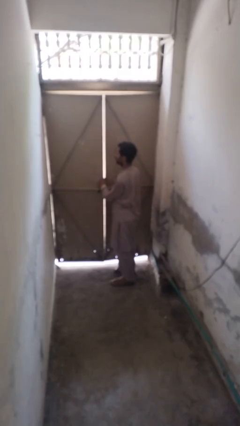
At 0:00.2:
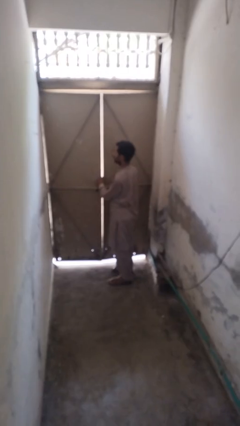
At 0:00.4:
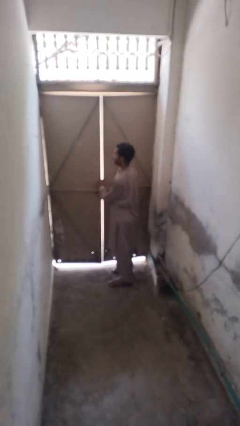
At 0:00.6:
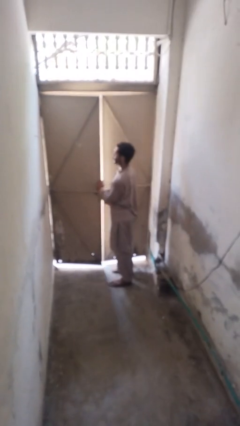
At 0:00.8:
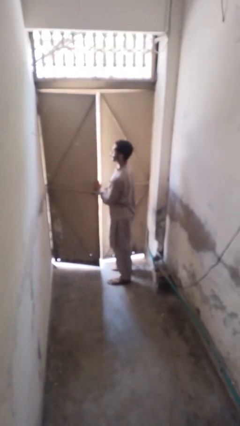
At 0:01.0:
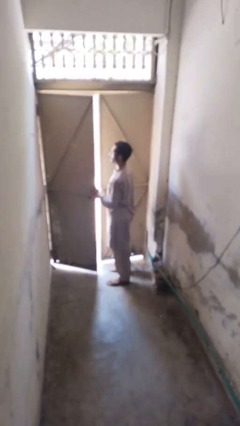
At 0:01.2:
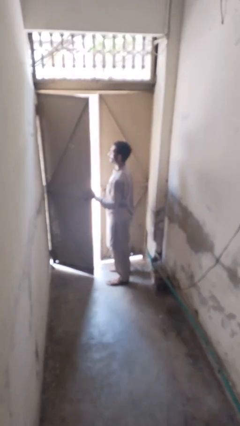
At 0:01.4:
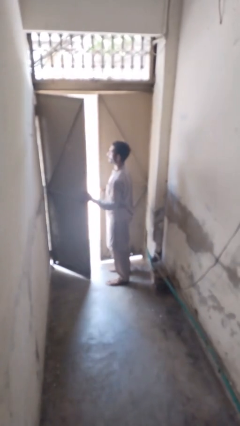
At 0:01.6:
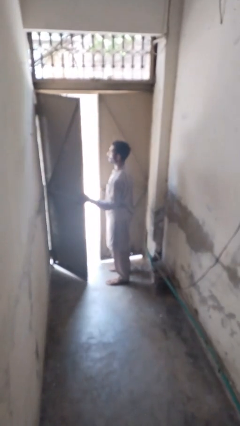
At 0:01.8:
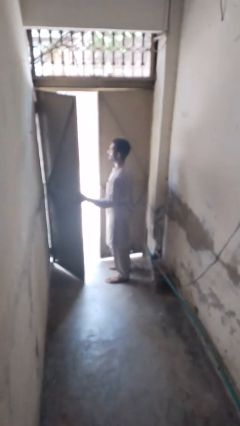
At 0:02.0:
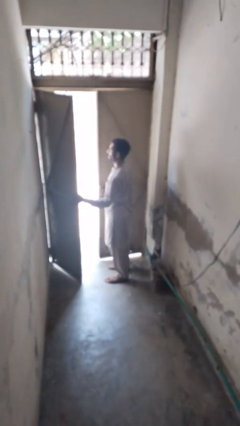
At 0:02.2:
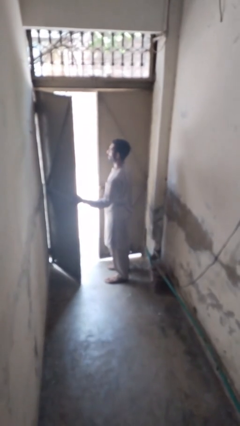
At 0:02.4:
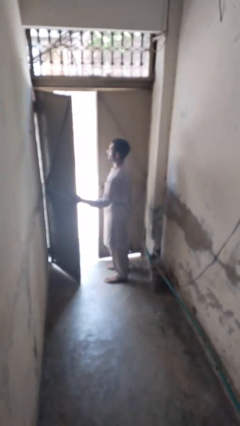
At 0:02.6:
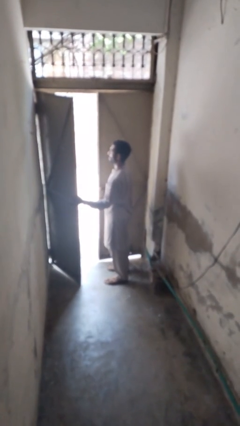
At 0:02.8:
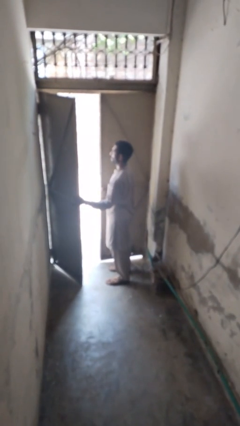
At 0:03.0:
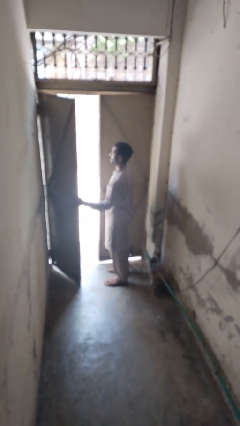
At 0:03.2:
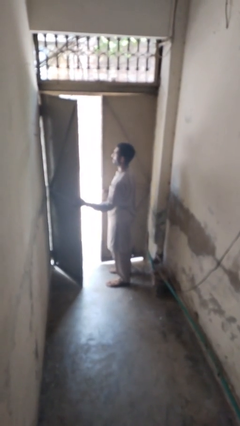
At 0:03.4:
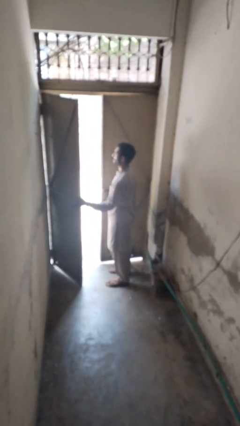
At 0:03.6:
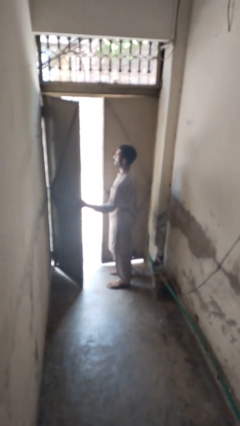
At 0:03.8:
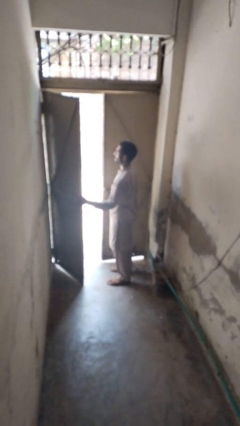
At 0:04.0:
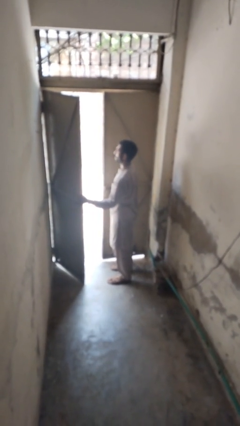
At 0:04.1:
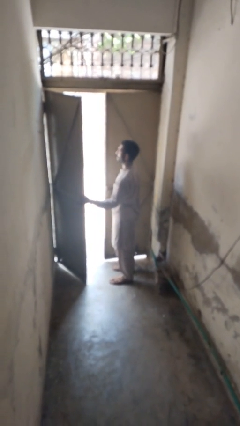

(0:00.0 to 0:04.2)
person opens gate

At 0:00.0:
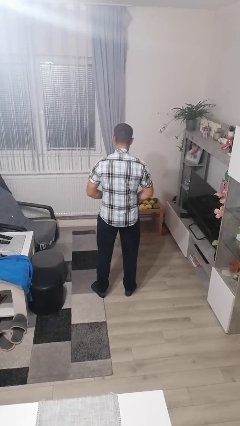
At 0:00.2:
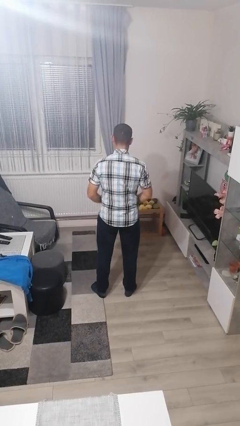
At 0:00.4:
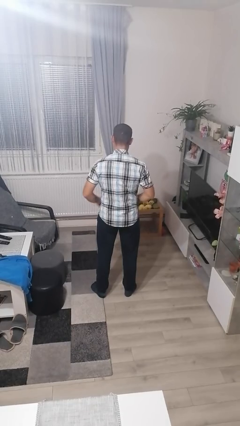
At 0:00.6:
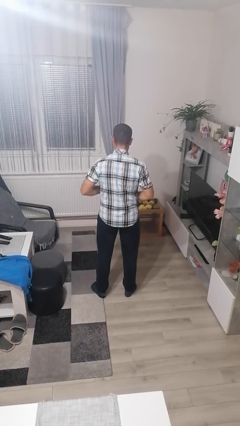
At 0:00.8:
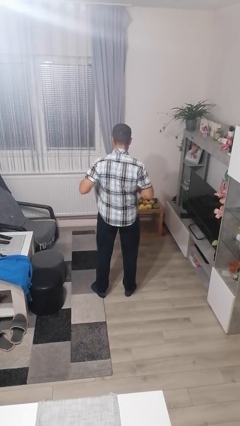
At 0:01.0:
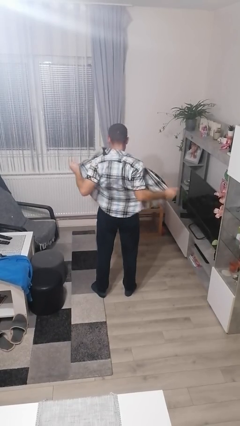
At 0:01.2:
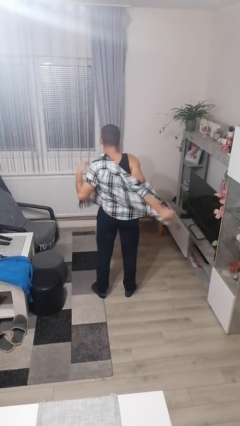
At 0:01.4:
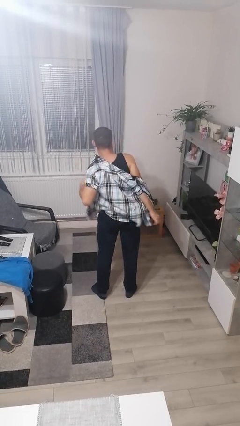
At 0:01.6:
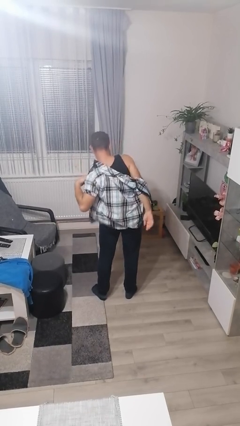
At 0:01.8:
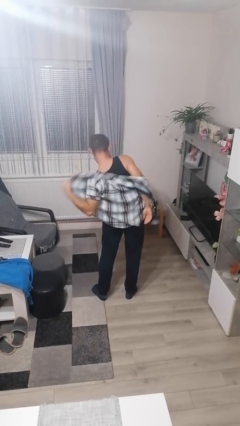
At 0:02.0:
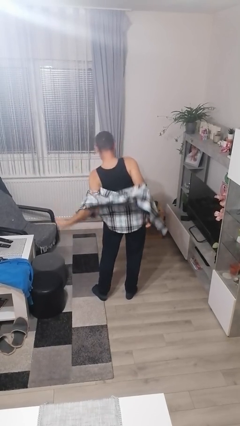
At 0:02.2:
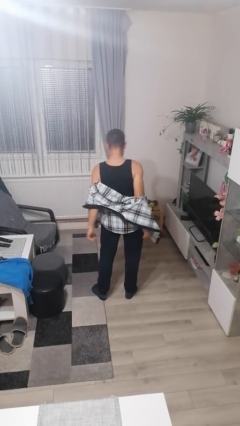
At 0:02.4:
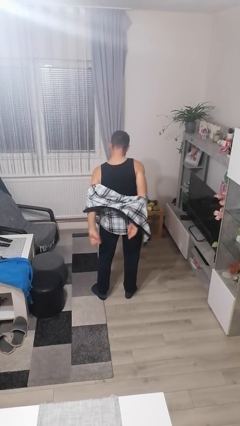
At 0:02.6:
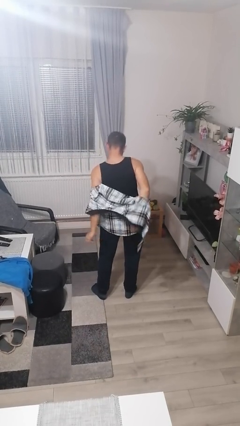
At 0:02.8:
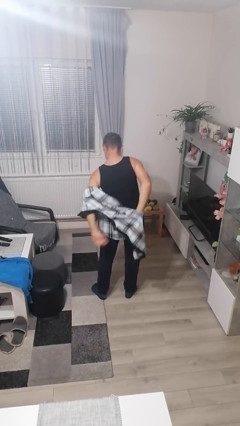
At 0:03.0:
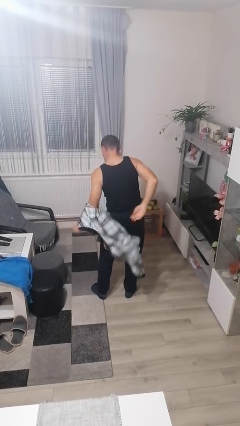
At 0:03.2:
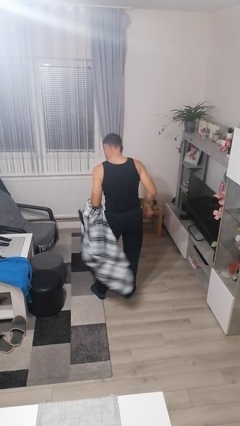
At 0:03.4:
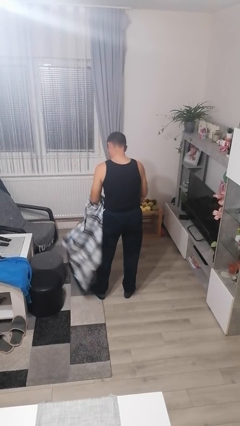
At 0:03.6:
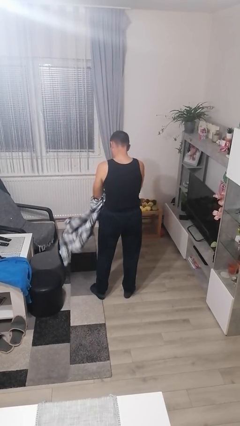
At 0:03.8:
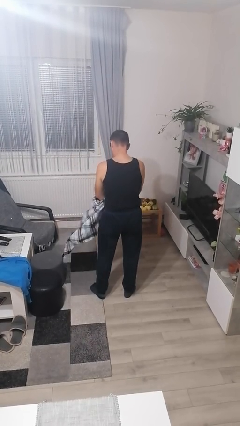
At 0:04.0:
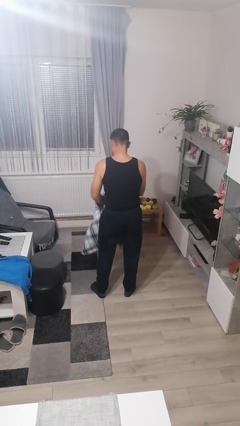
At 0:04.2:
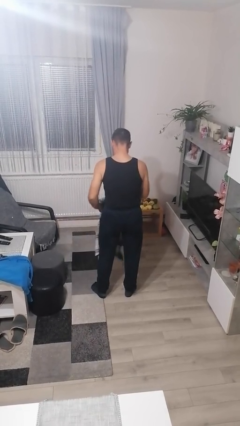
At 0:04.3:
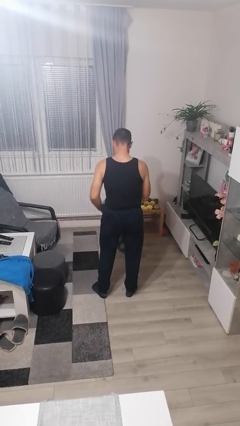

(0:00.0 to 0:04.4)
person takes off shirt

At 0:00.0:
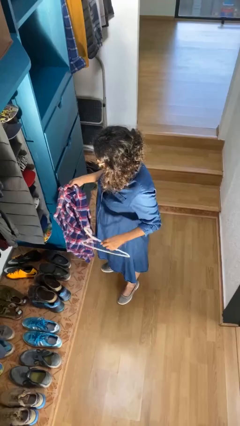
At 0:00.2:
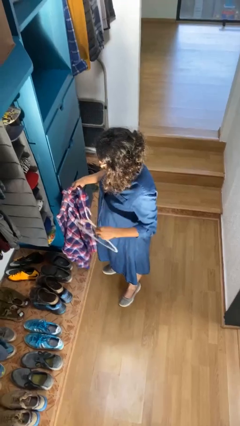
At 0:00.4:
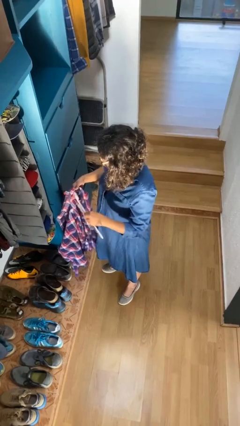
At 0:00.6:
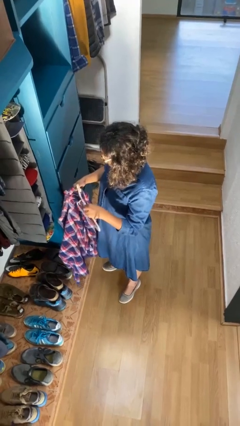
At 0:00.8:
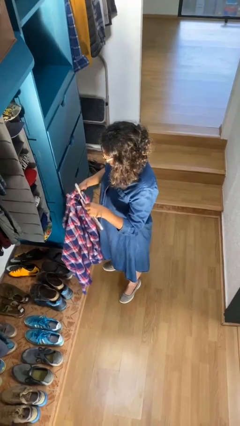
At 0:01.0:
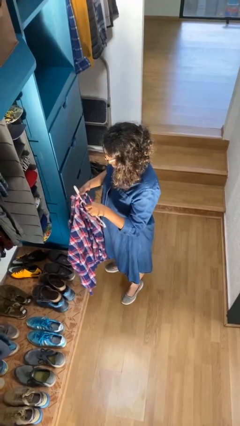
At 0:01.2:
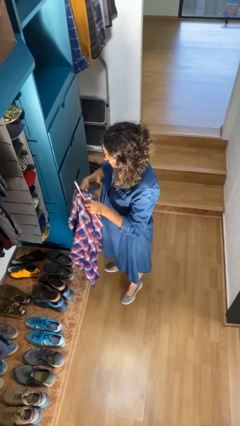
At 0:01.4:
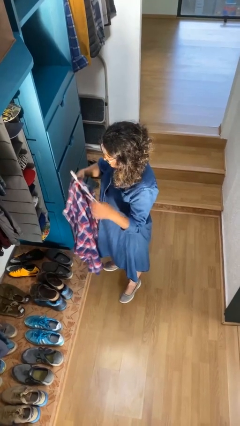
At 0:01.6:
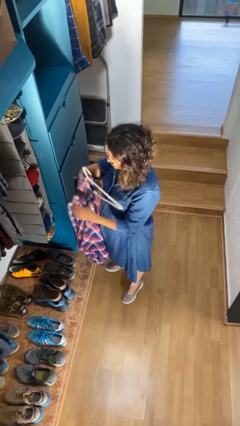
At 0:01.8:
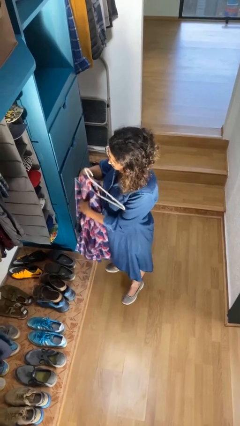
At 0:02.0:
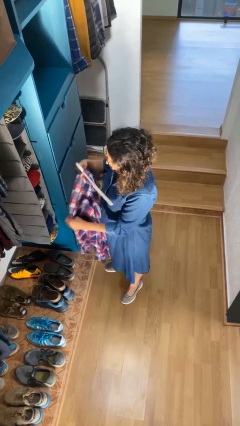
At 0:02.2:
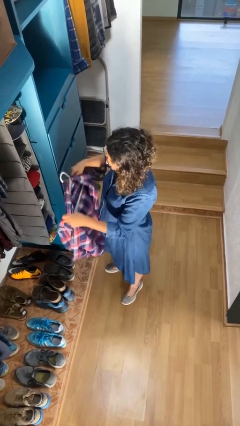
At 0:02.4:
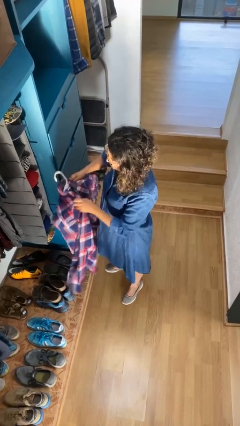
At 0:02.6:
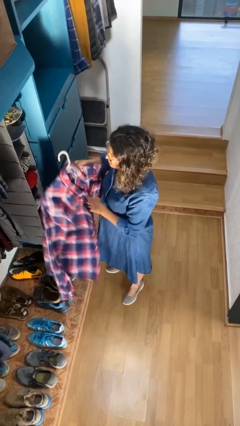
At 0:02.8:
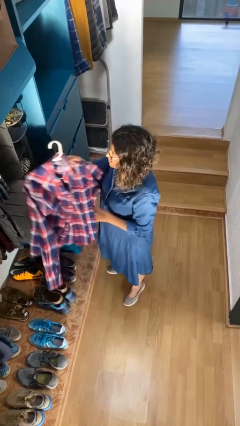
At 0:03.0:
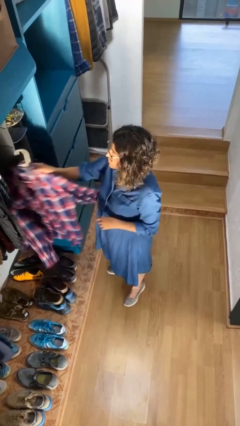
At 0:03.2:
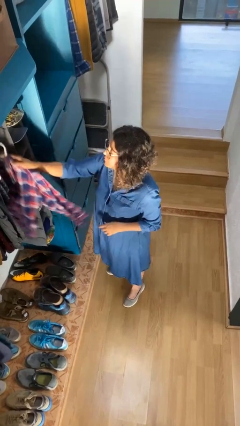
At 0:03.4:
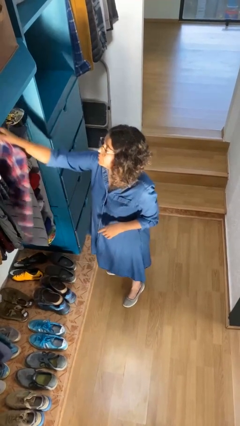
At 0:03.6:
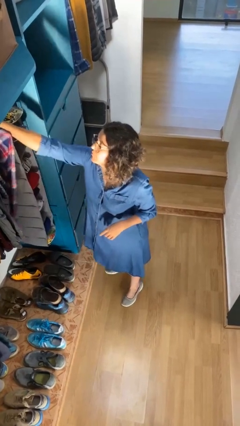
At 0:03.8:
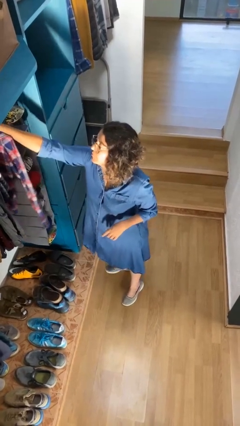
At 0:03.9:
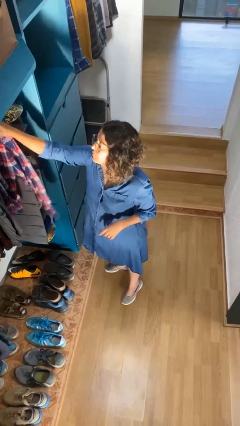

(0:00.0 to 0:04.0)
person puts clothes into closet

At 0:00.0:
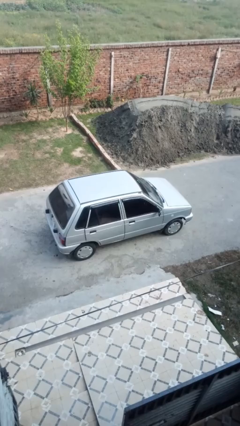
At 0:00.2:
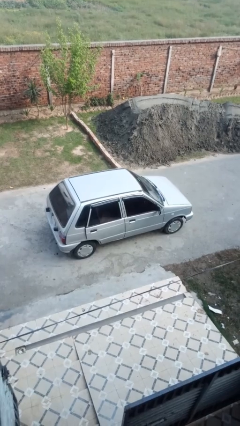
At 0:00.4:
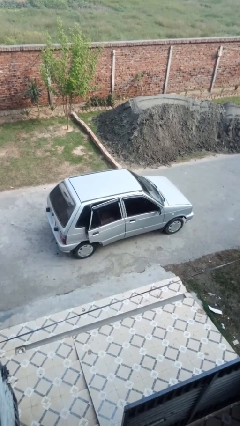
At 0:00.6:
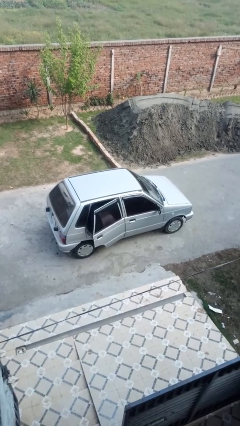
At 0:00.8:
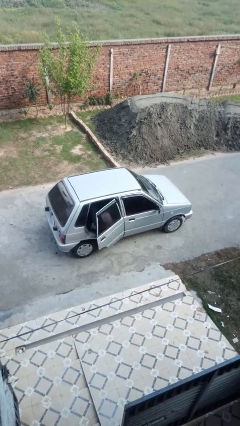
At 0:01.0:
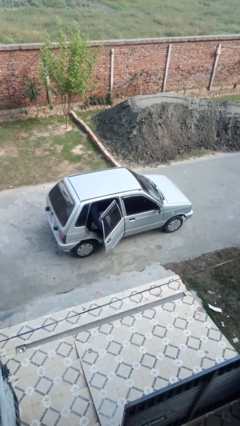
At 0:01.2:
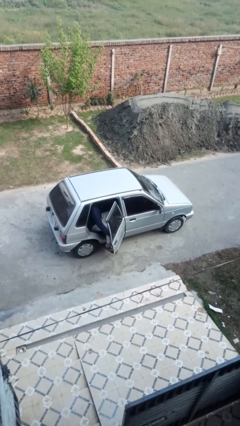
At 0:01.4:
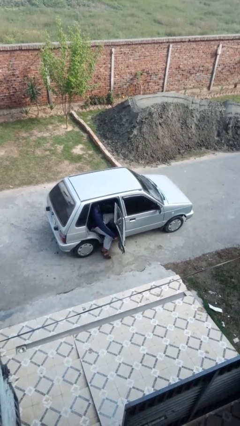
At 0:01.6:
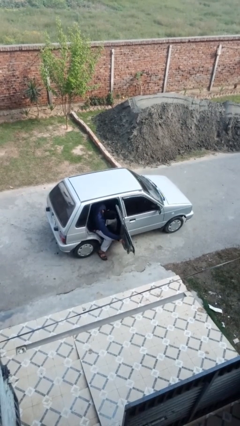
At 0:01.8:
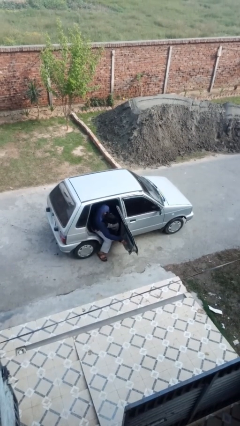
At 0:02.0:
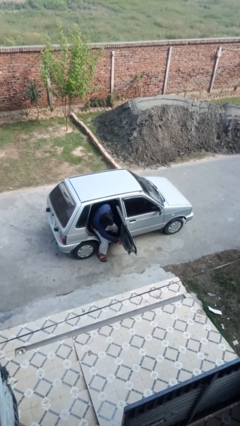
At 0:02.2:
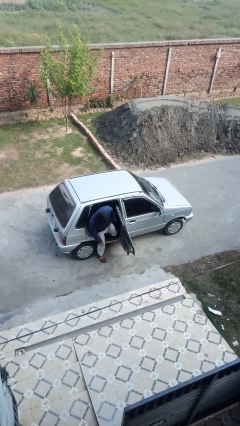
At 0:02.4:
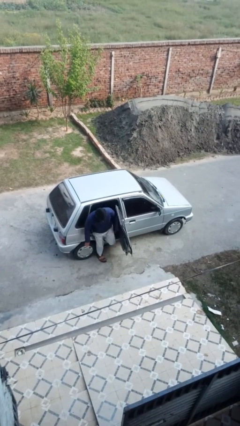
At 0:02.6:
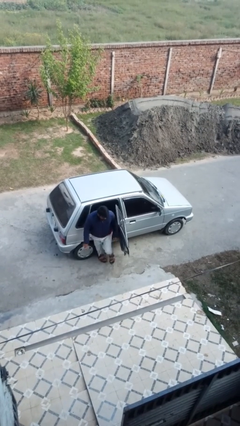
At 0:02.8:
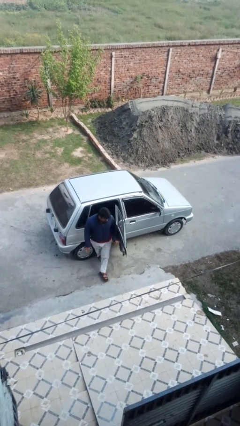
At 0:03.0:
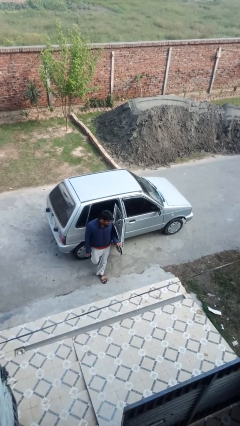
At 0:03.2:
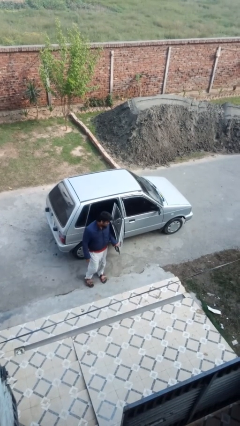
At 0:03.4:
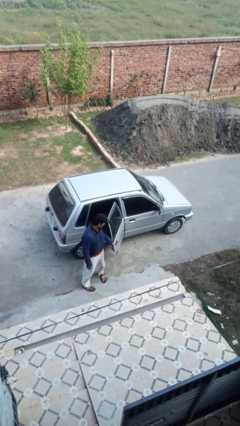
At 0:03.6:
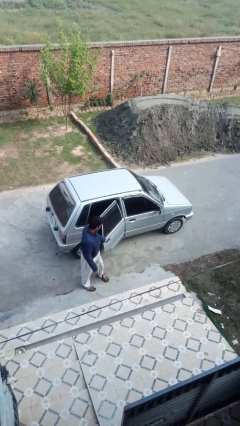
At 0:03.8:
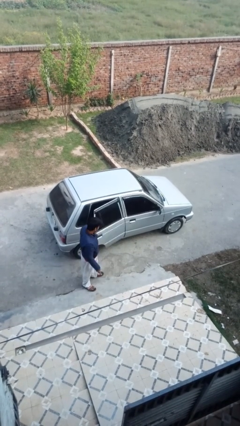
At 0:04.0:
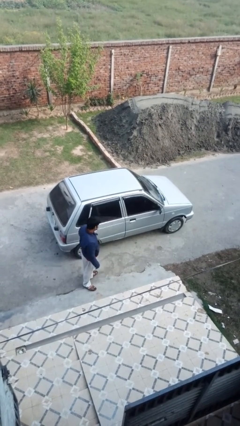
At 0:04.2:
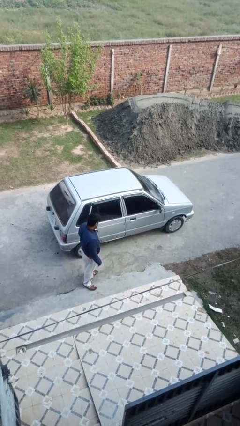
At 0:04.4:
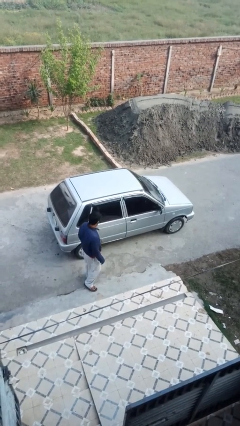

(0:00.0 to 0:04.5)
car drops off person

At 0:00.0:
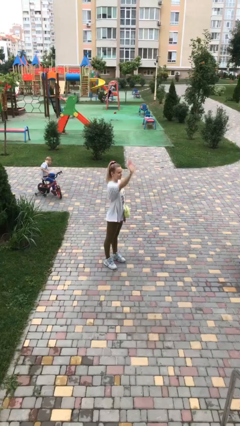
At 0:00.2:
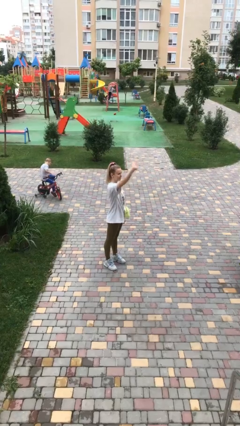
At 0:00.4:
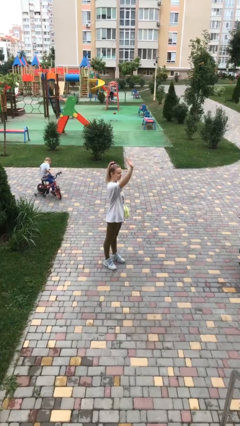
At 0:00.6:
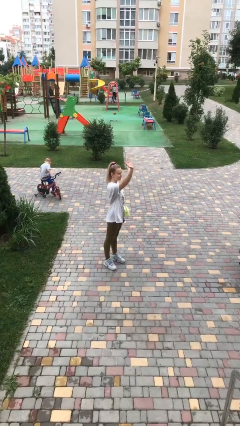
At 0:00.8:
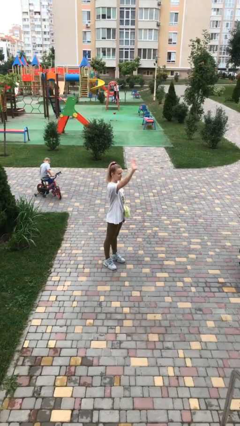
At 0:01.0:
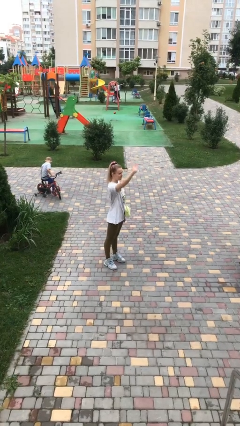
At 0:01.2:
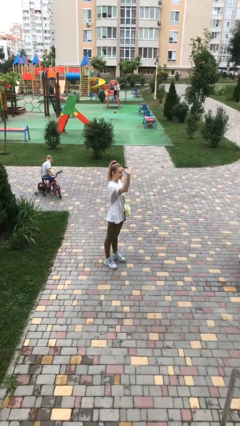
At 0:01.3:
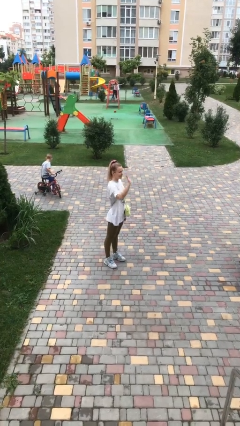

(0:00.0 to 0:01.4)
person waves at person
